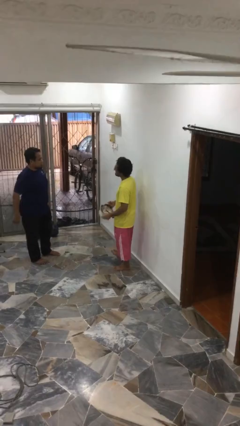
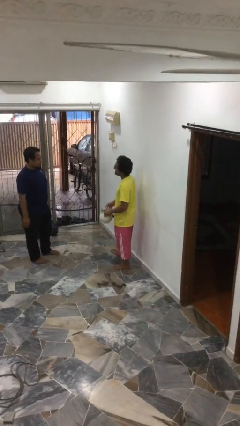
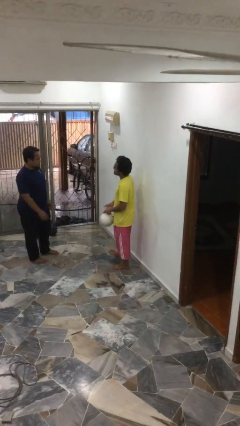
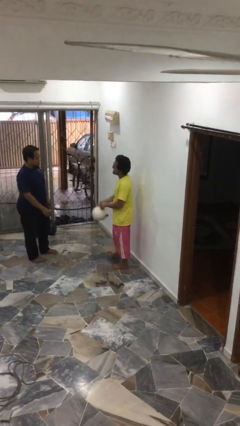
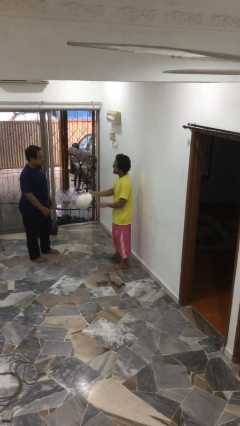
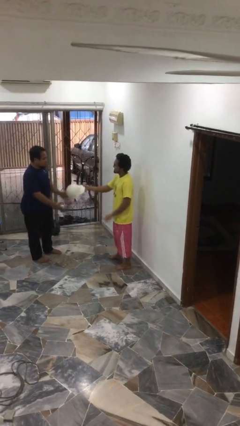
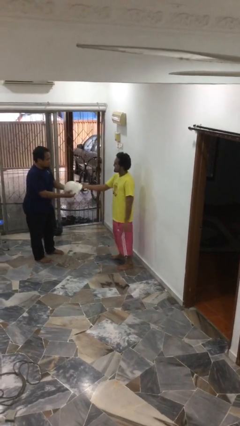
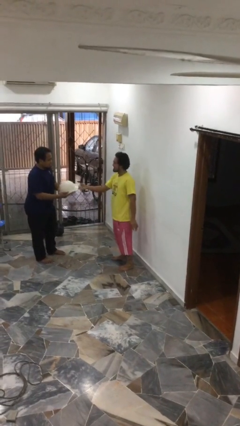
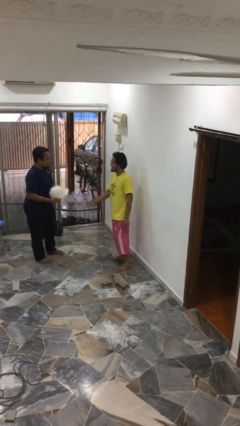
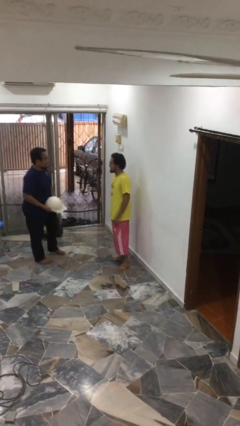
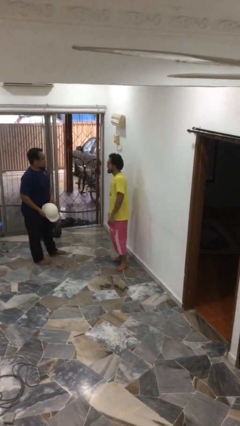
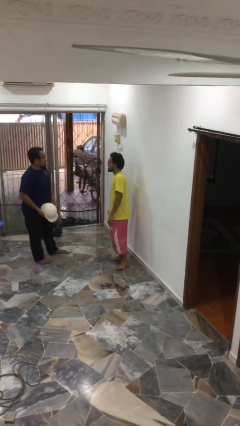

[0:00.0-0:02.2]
person transfers object to person

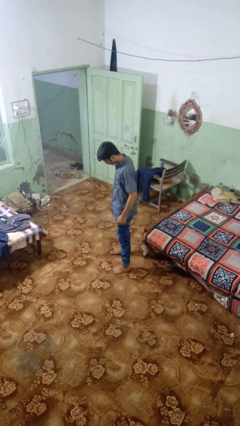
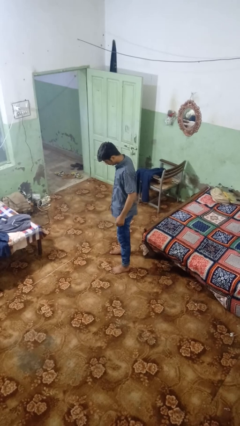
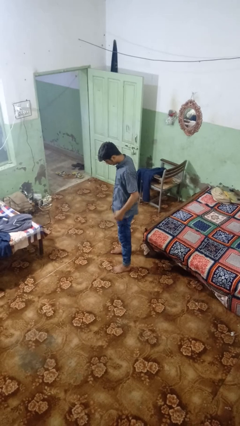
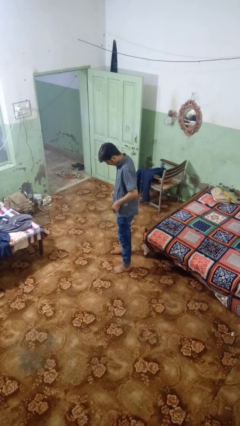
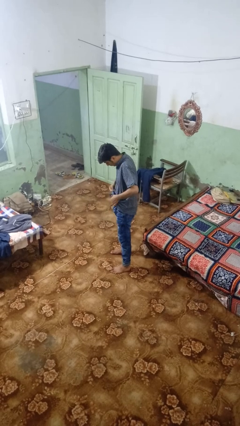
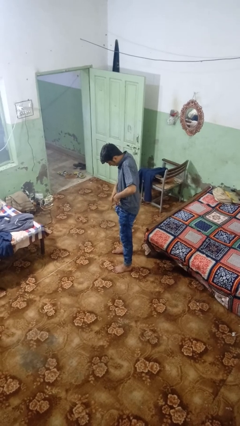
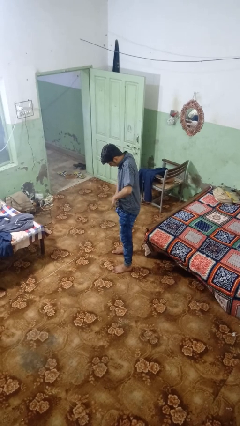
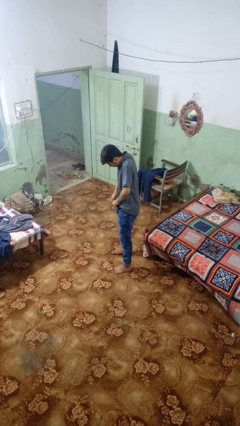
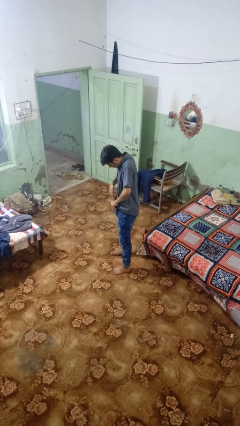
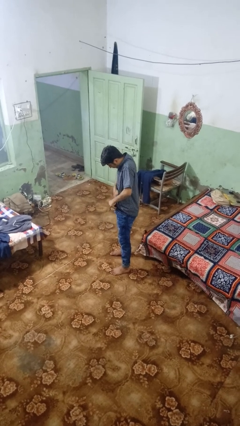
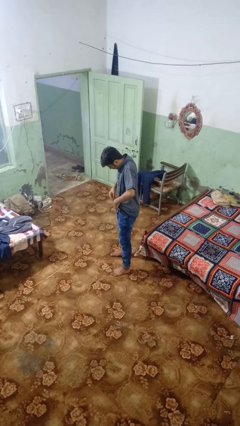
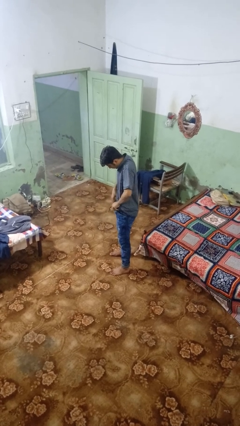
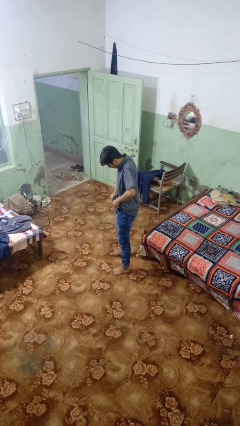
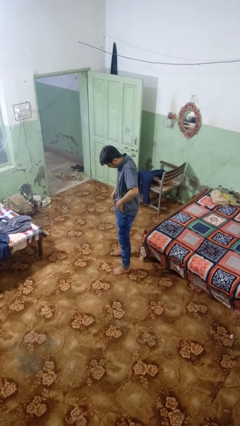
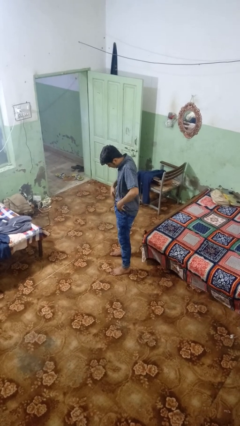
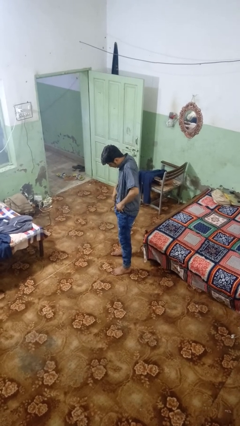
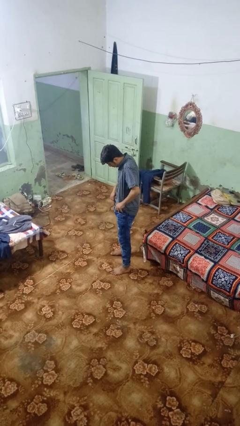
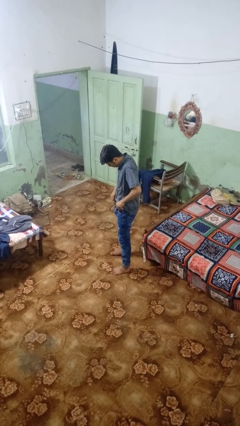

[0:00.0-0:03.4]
person tucks in shirt

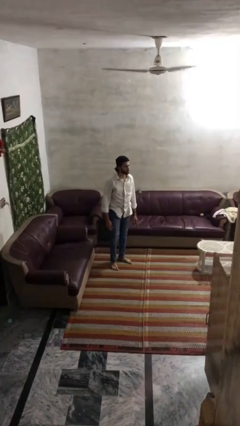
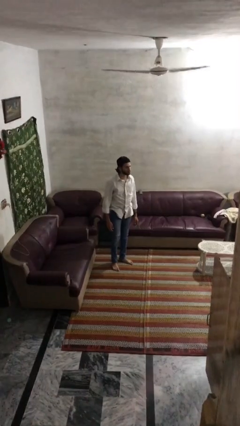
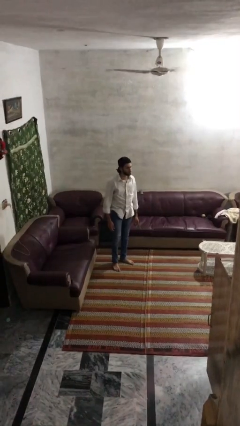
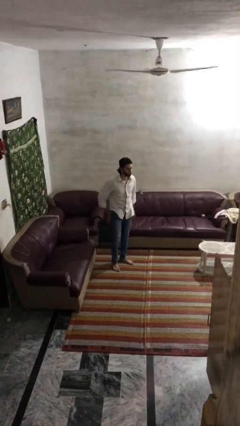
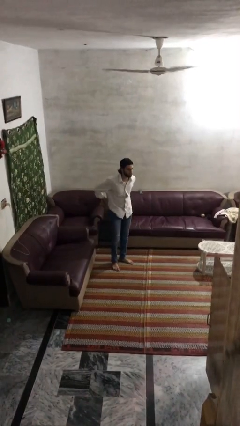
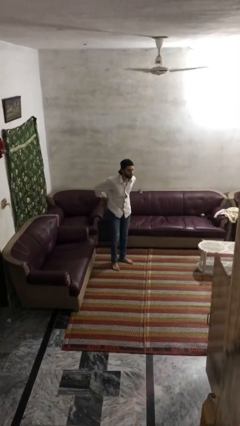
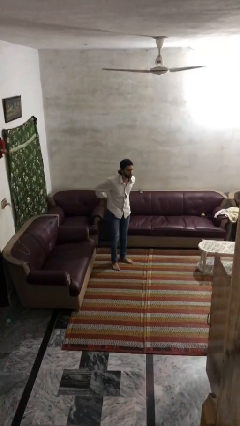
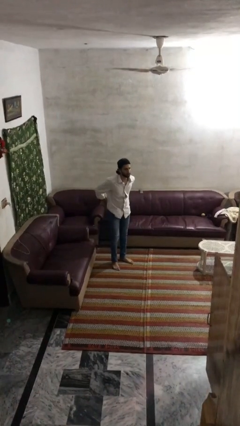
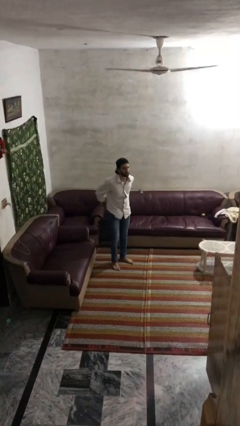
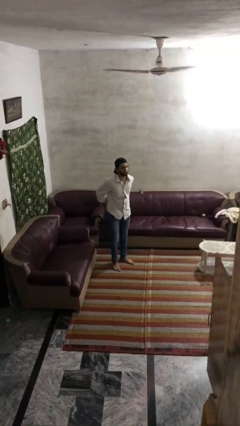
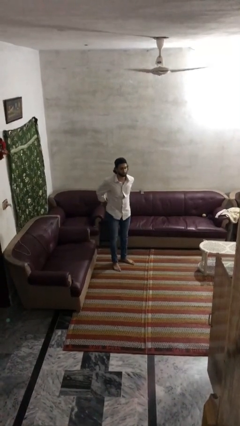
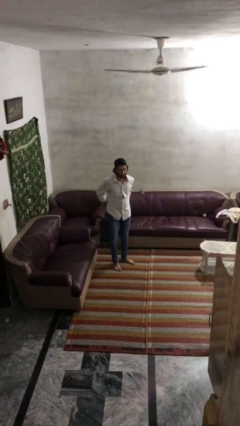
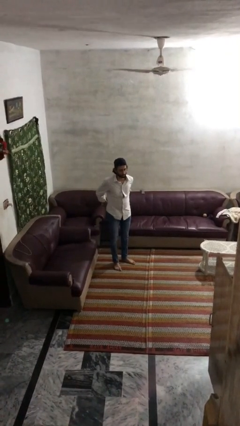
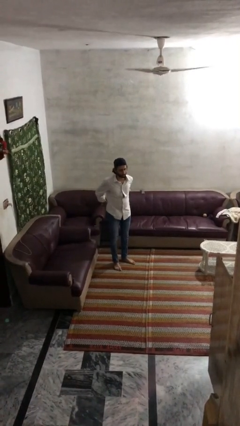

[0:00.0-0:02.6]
person puts hands in back pockets

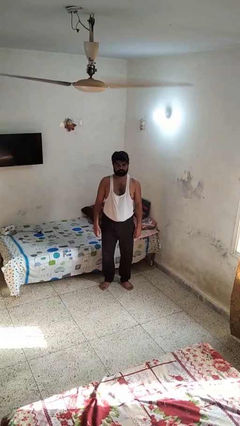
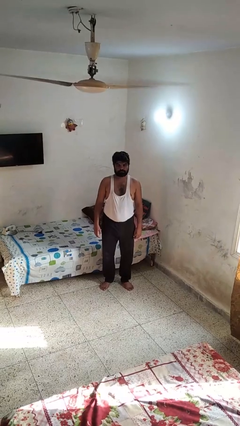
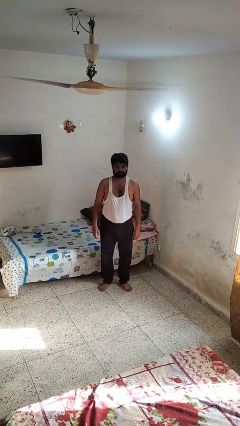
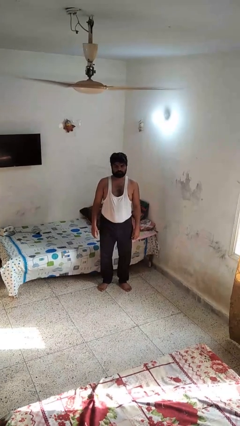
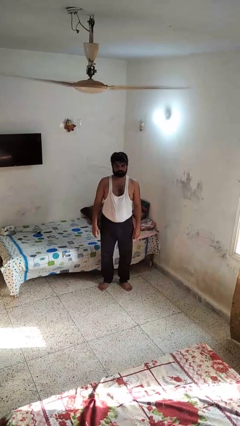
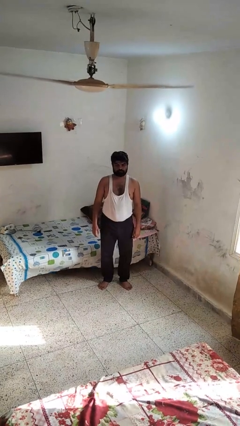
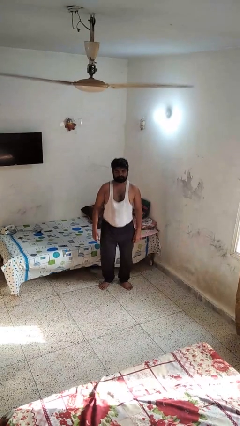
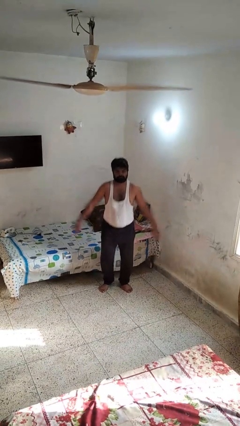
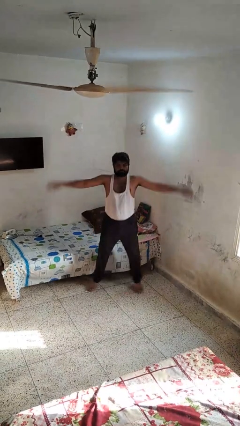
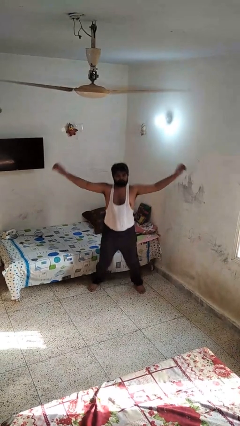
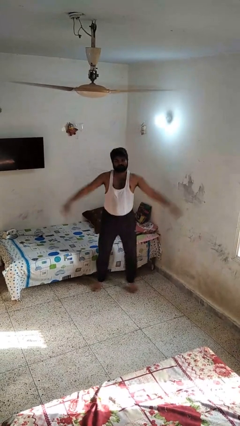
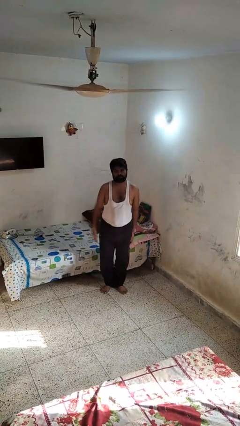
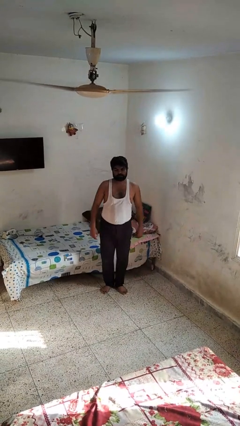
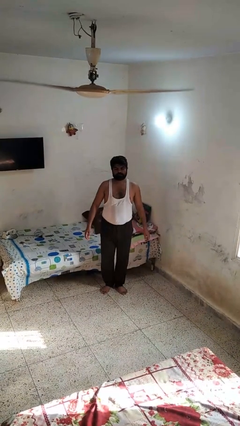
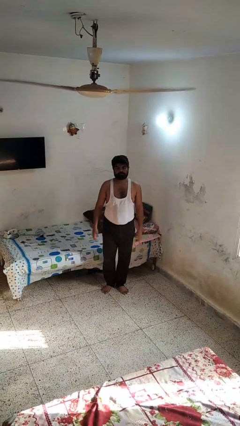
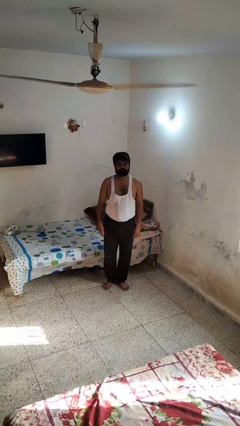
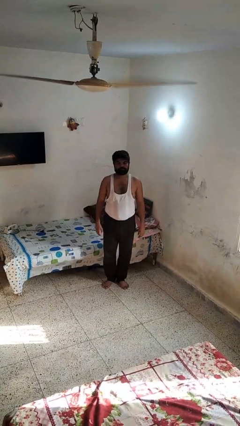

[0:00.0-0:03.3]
person exercises with jumping jacks

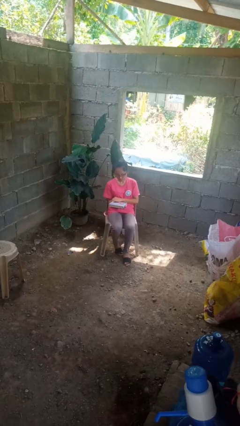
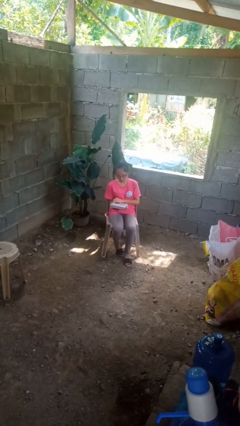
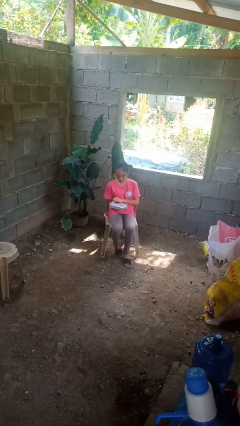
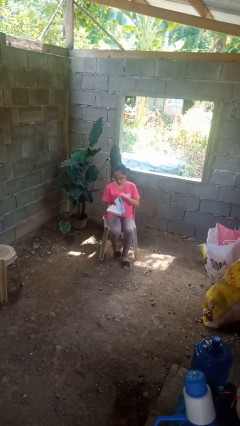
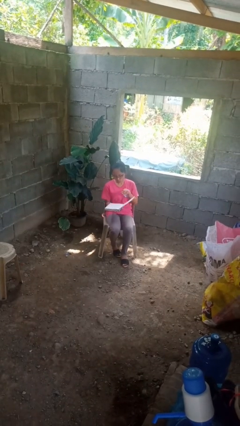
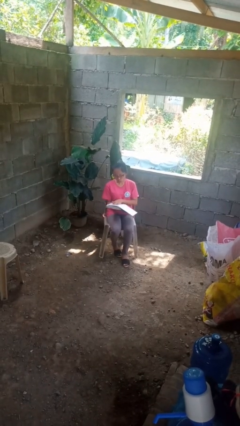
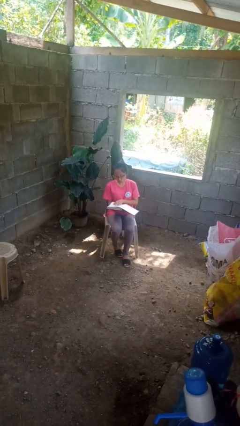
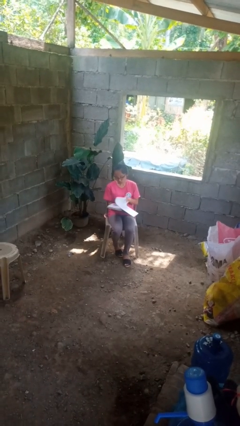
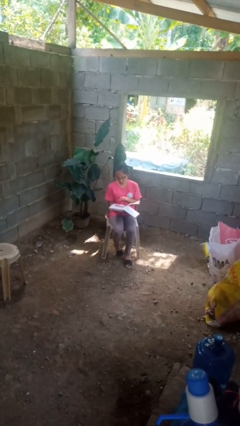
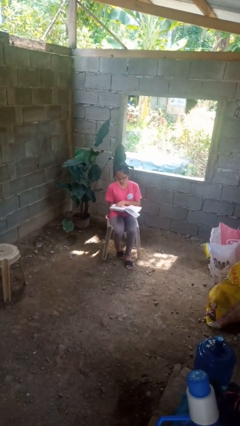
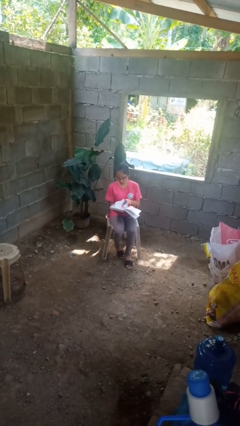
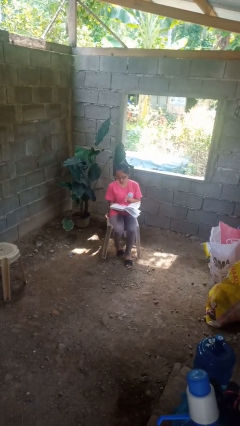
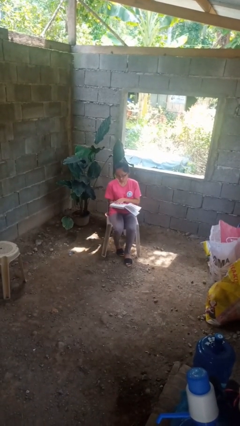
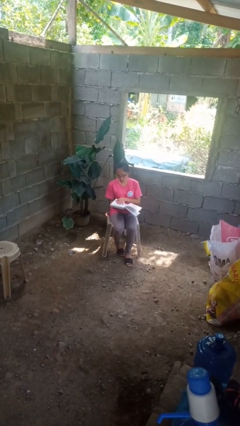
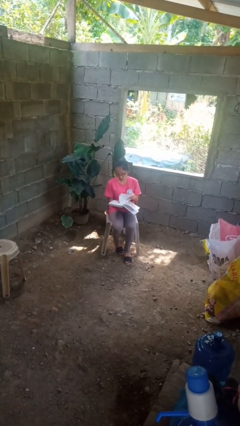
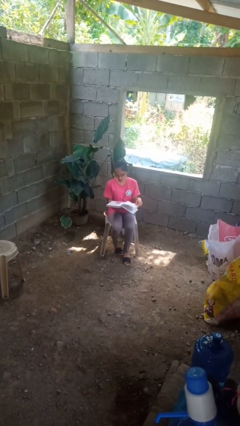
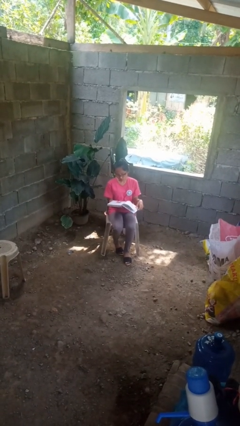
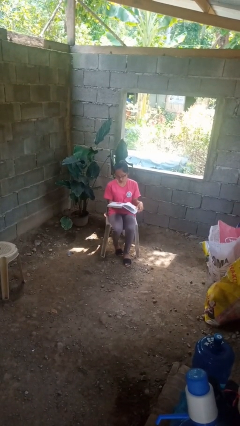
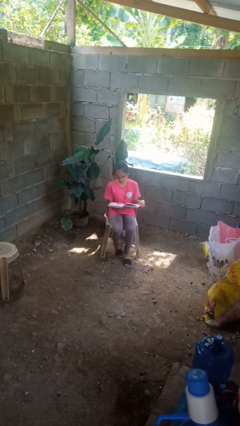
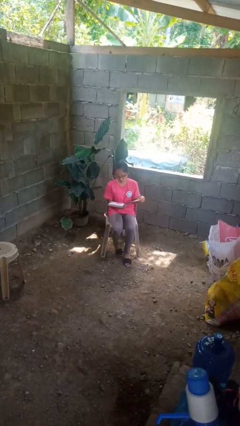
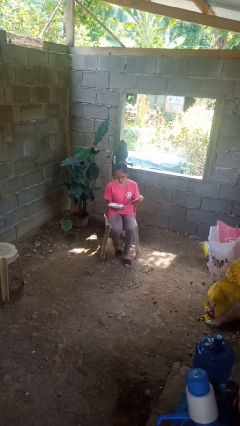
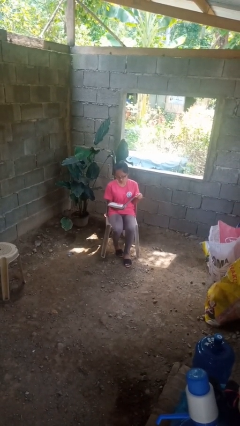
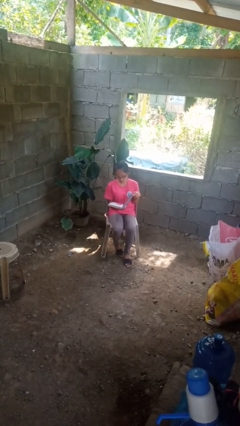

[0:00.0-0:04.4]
person reads book

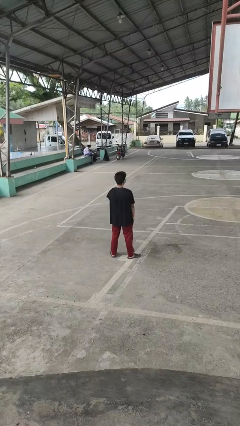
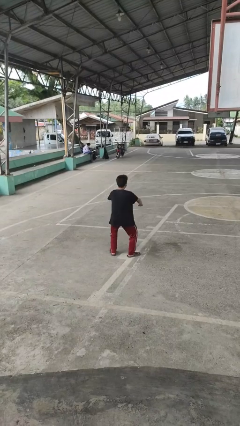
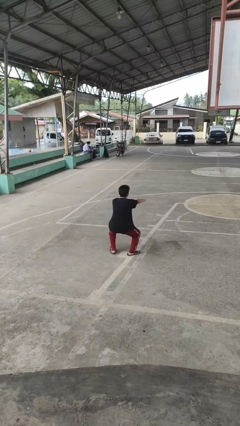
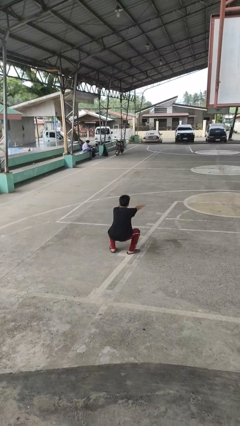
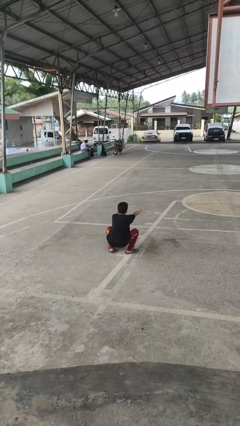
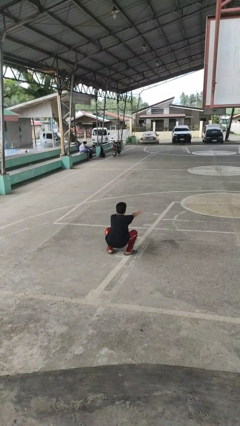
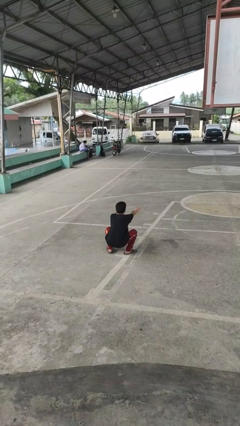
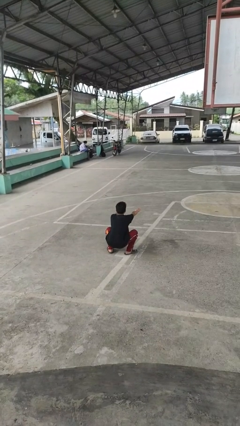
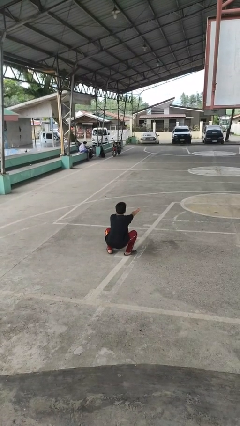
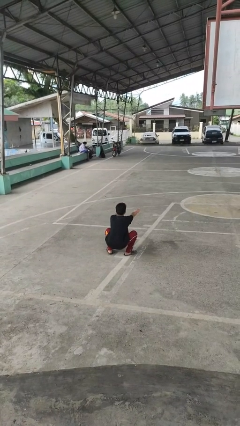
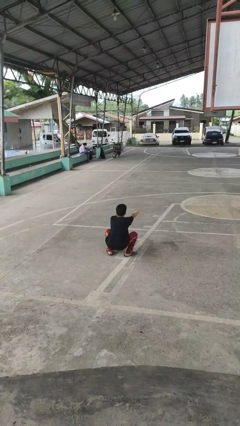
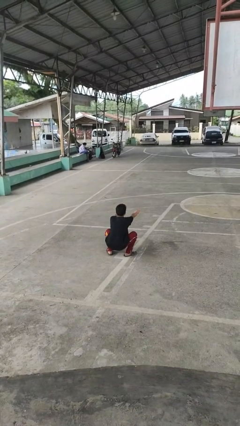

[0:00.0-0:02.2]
person squats
